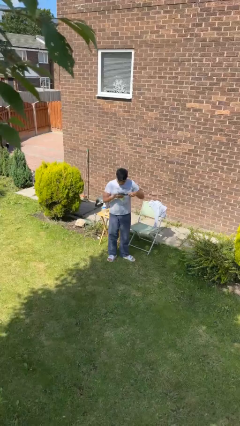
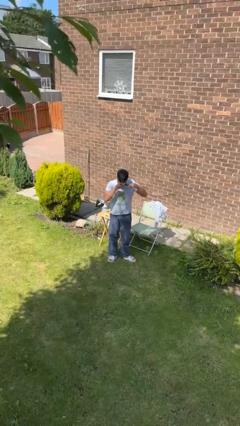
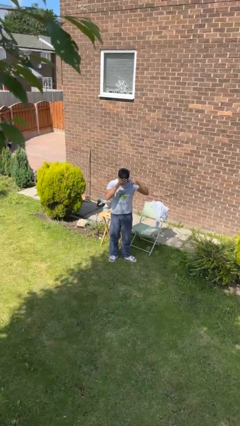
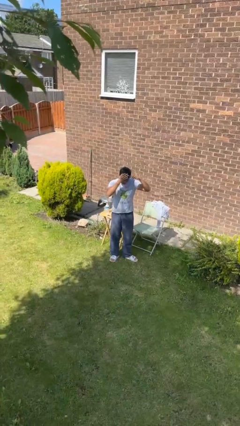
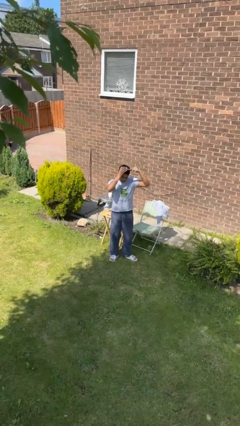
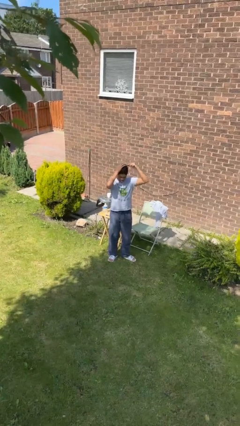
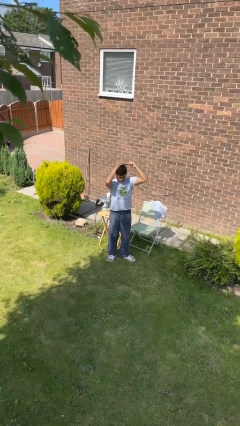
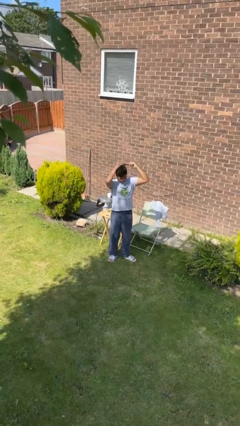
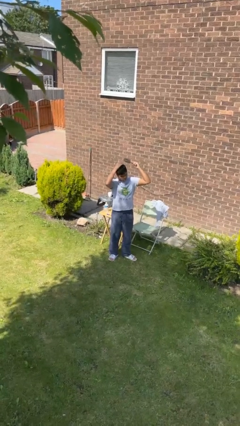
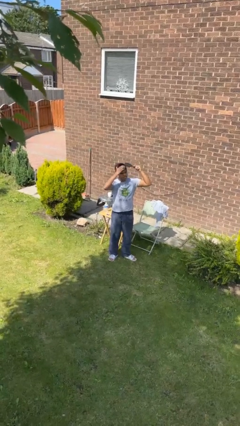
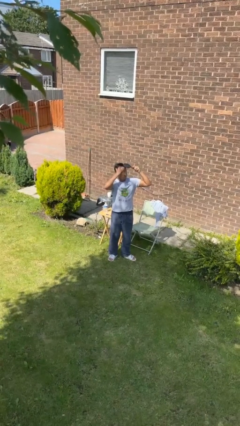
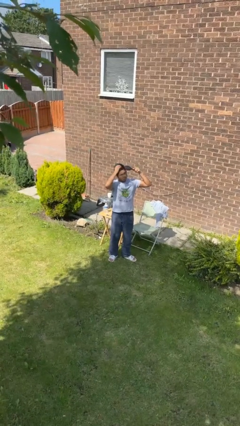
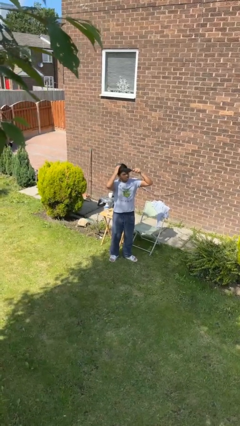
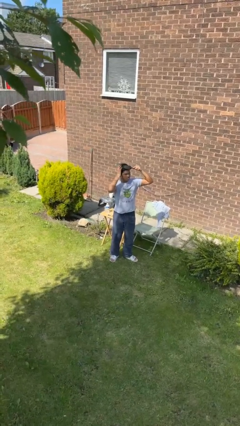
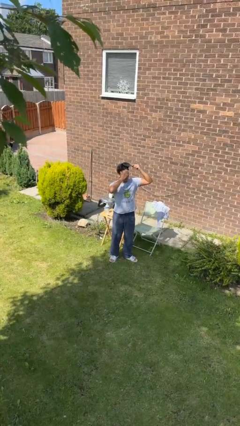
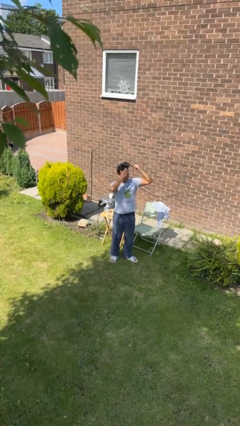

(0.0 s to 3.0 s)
person brushes hair

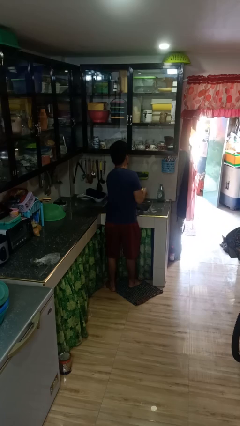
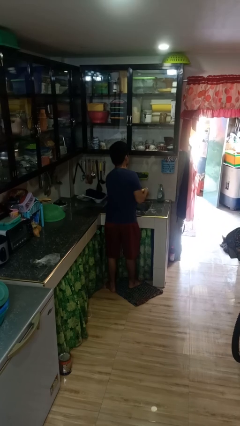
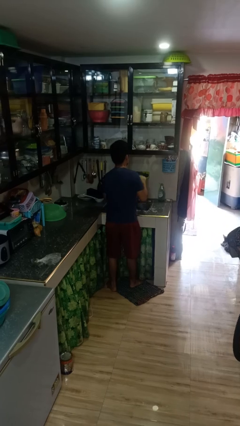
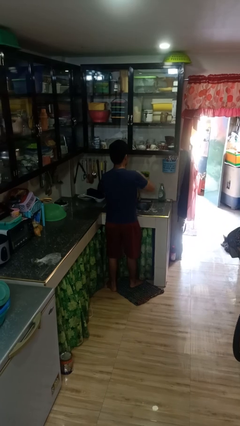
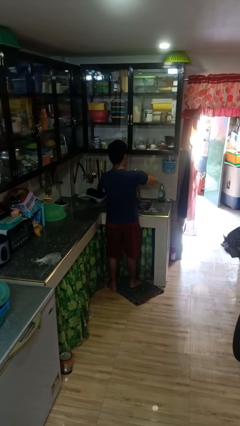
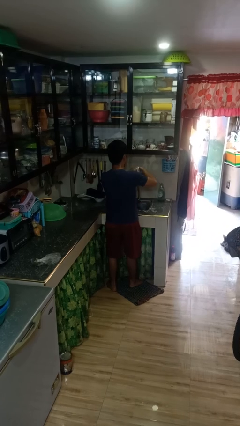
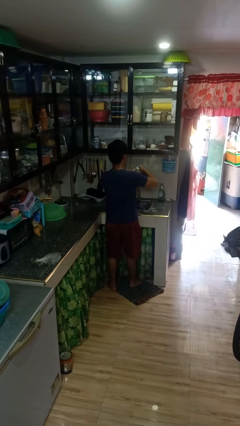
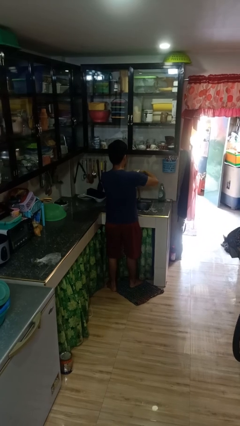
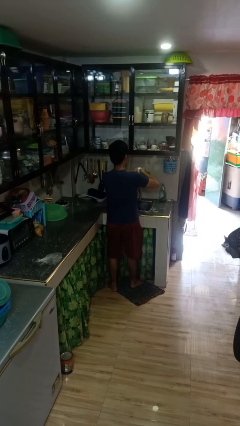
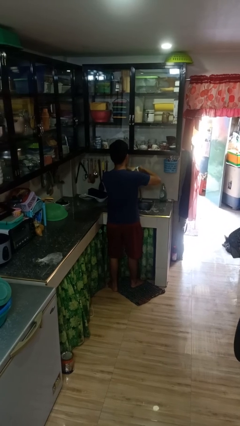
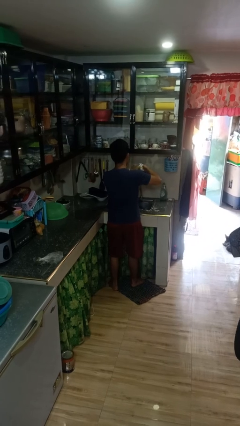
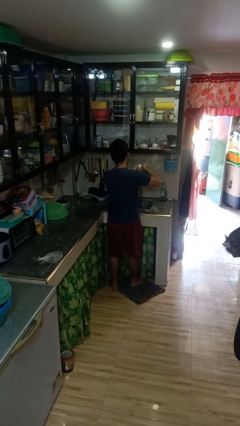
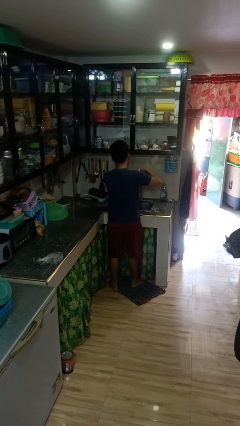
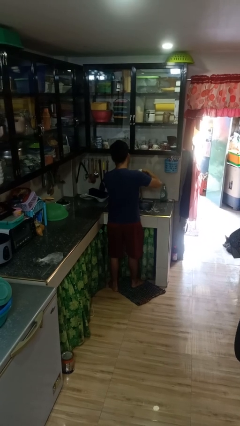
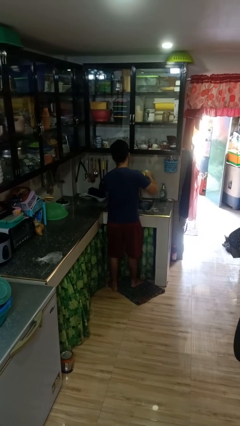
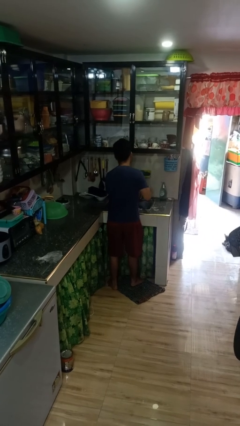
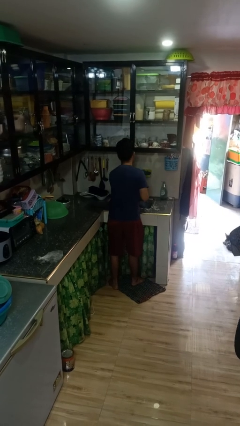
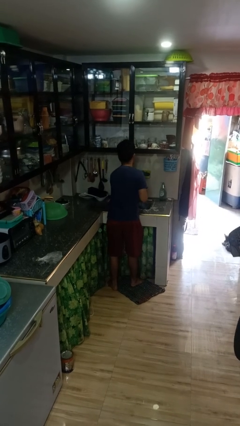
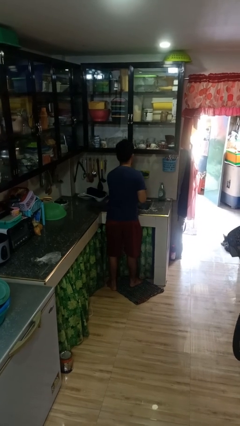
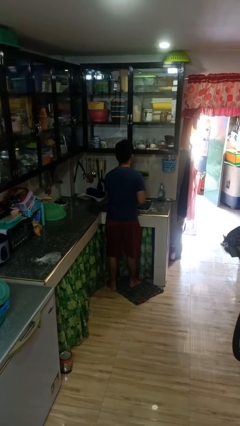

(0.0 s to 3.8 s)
person washes dish

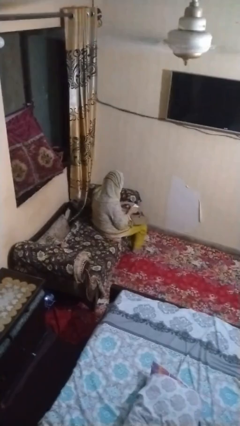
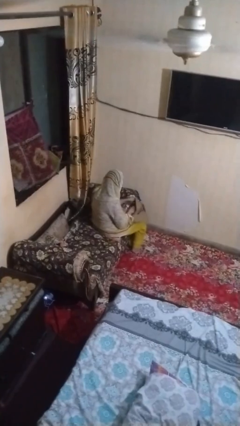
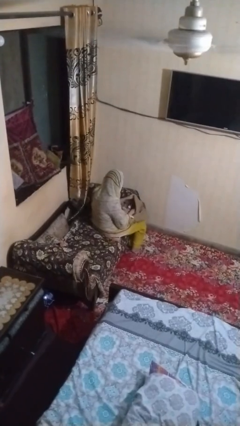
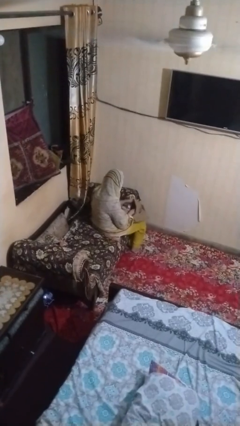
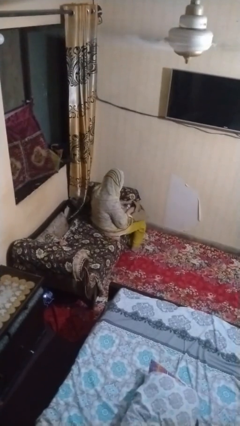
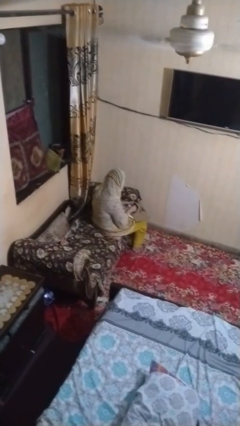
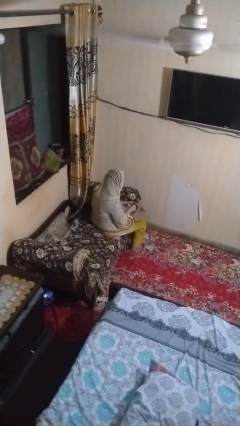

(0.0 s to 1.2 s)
person puts object into bag

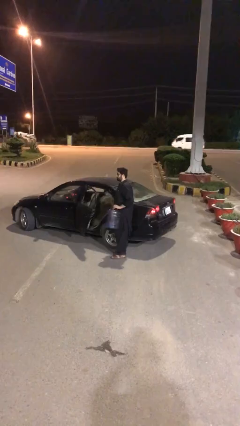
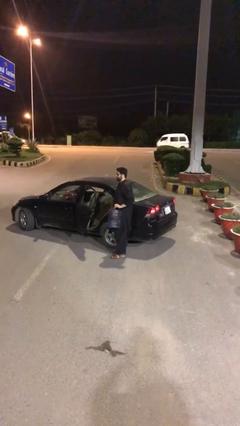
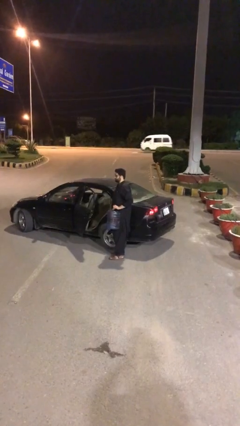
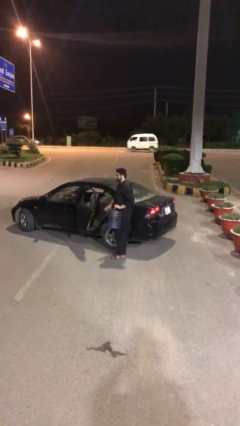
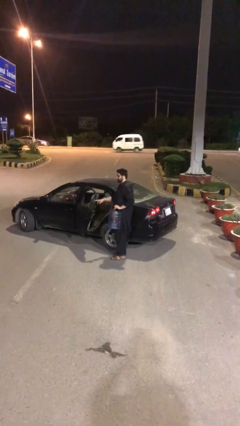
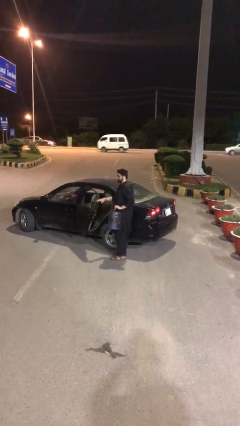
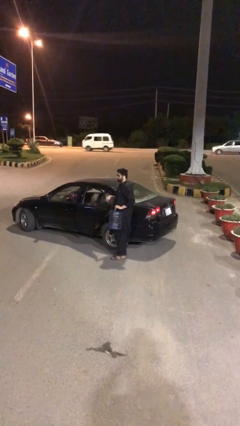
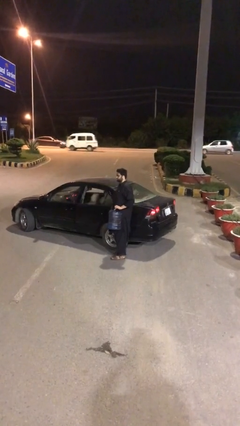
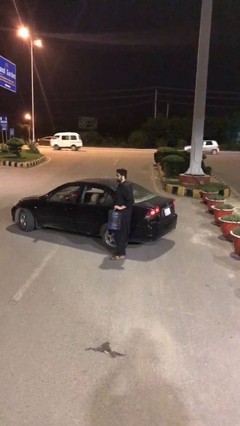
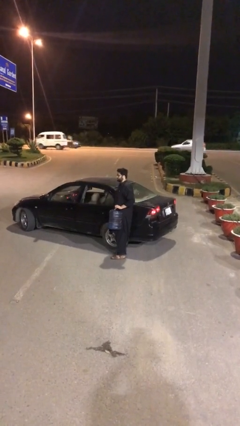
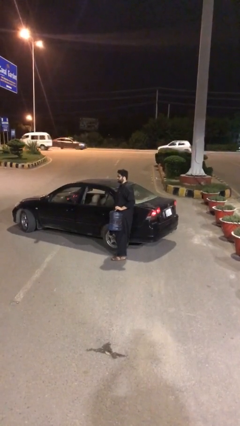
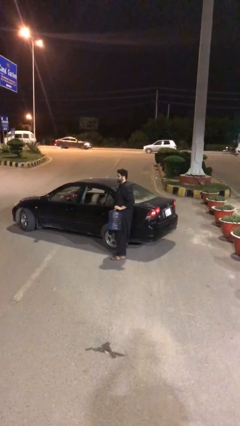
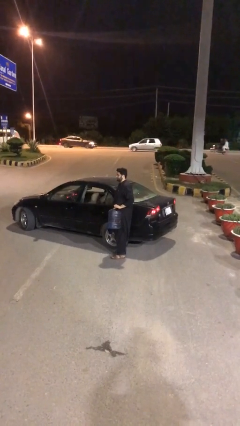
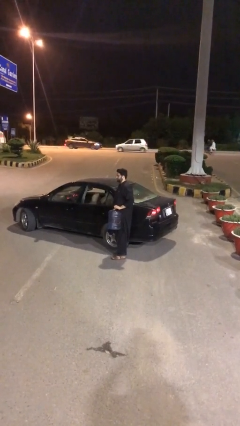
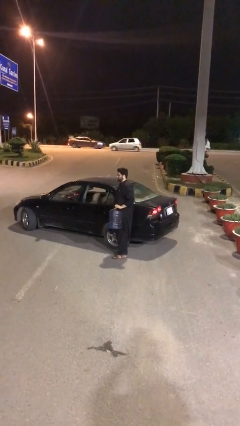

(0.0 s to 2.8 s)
person closes car door

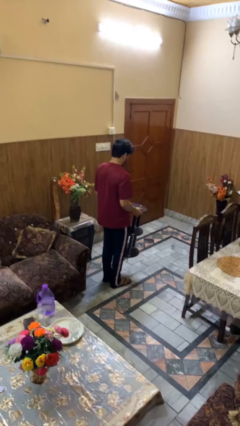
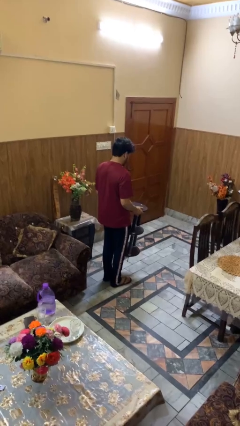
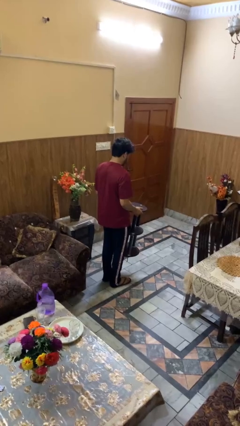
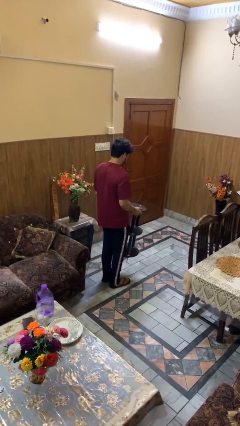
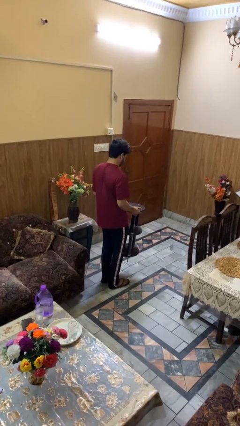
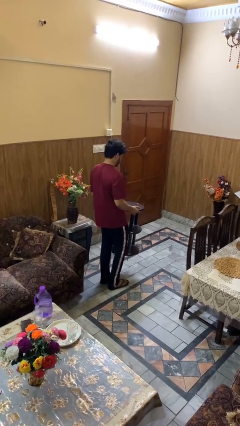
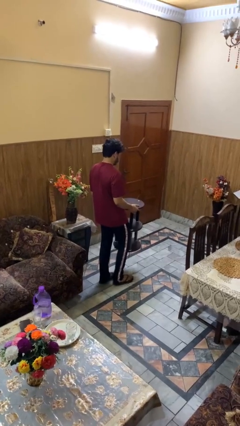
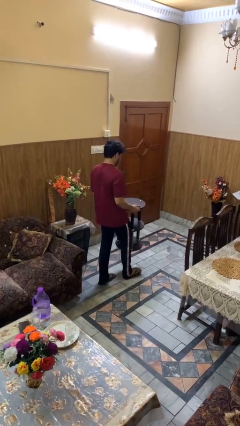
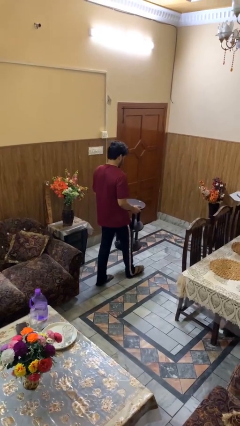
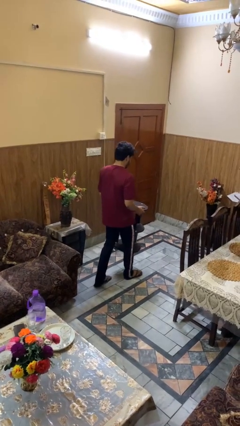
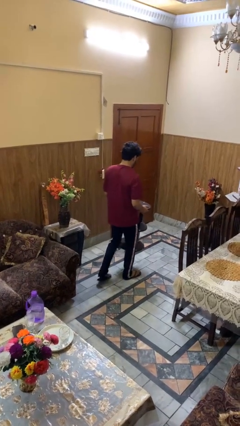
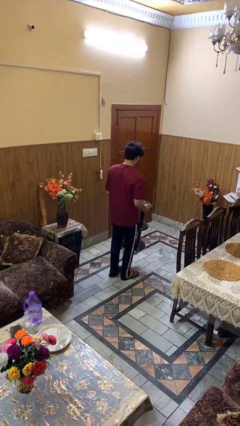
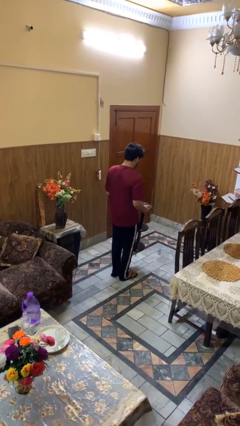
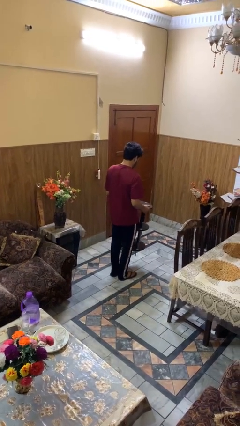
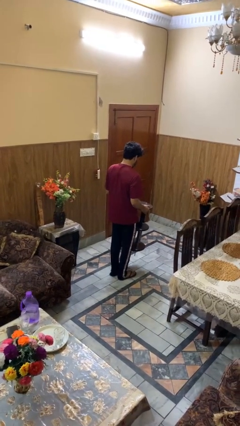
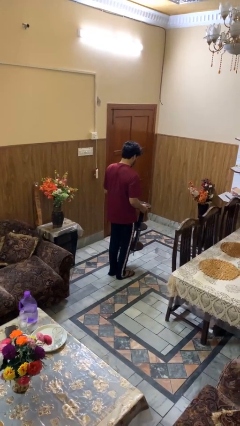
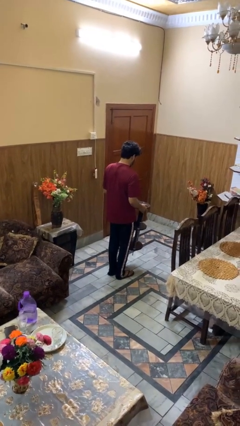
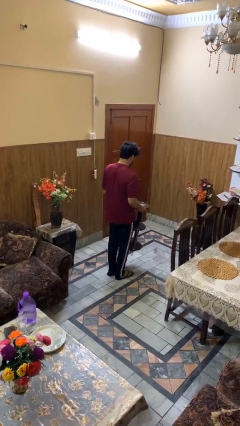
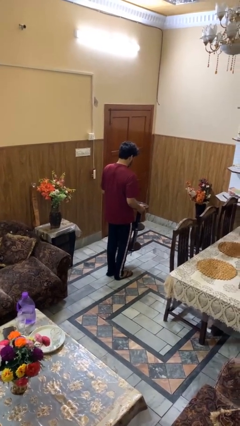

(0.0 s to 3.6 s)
person carries furniture

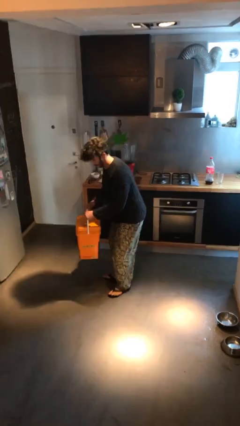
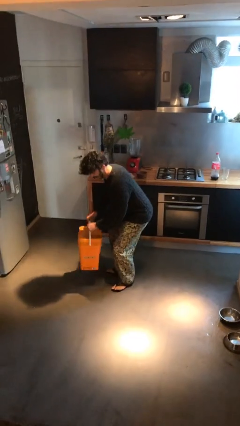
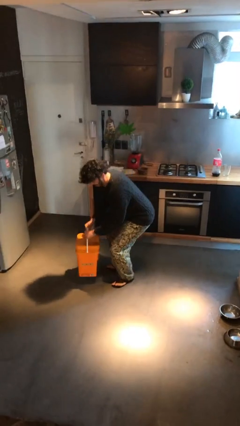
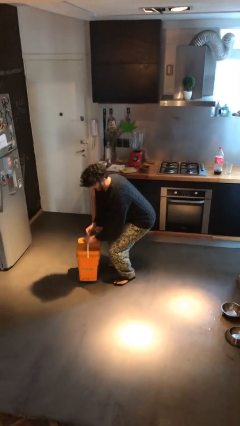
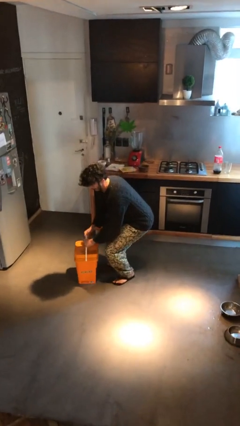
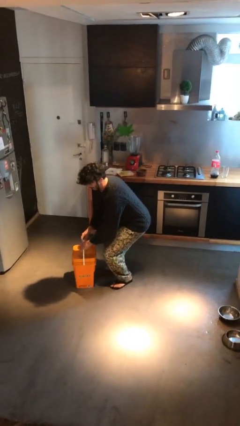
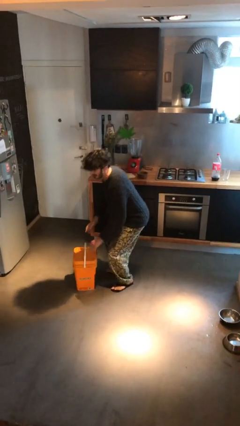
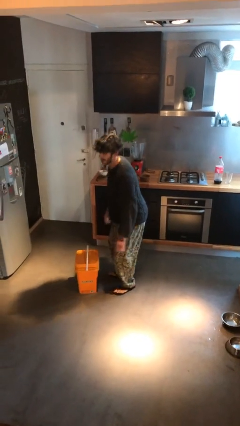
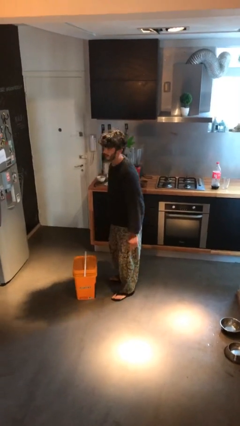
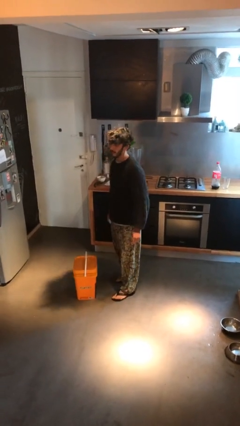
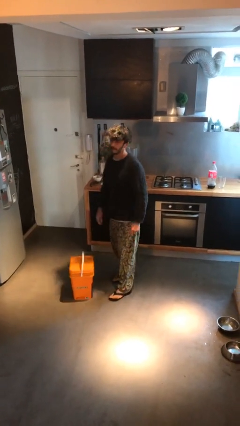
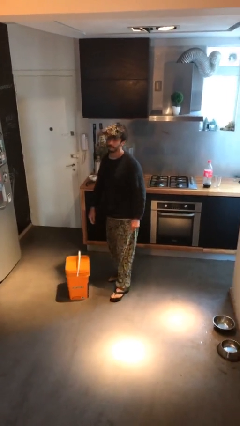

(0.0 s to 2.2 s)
person puts down object on floor

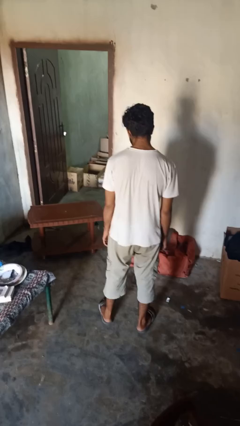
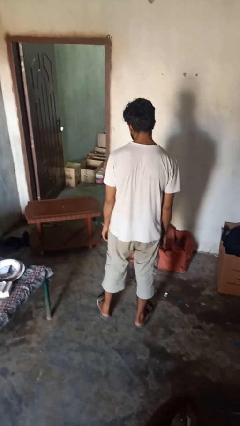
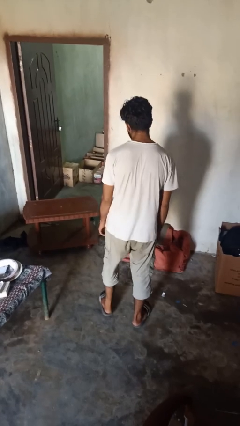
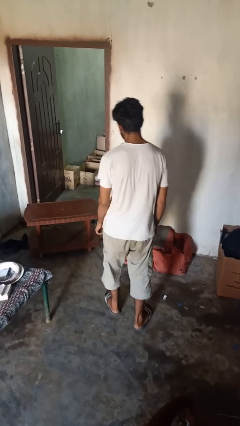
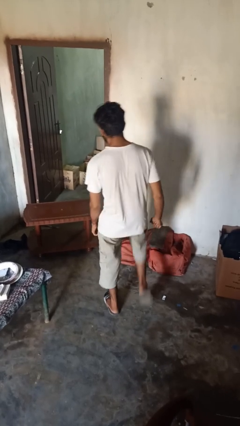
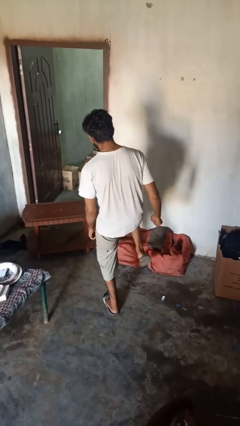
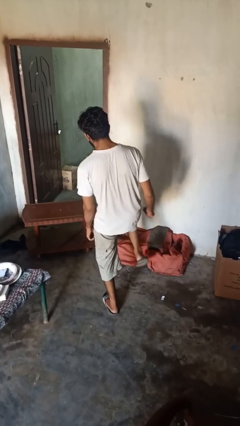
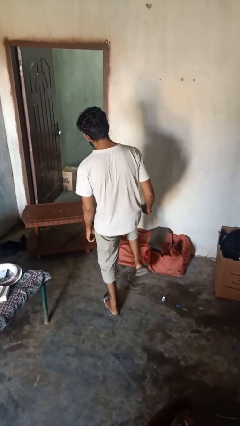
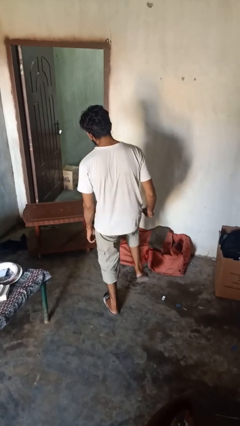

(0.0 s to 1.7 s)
person karate kicks
